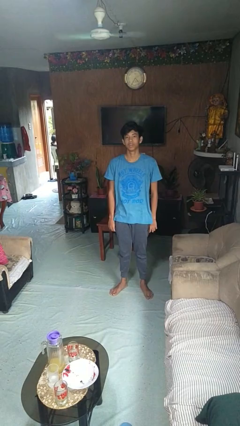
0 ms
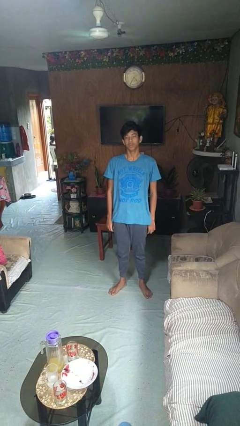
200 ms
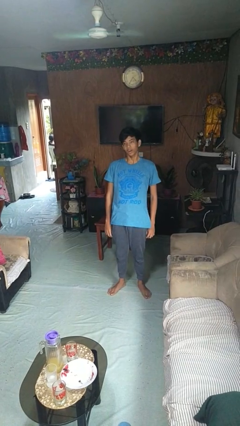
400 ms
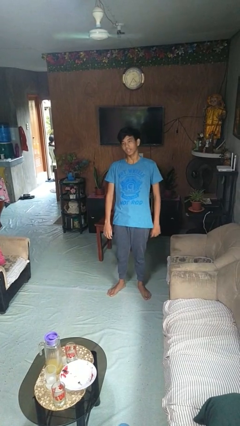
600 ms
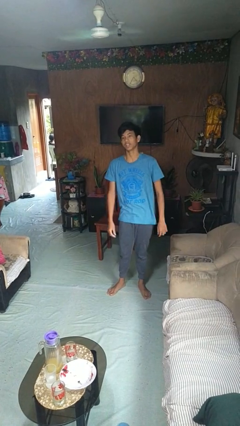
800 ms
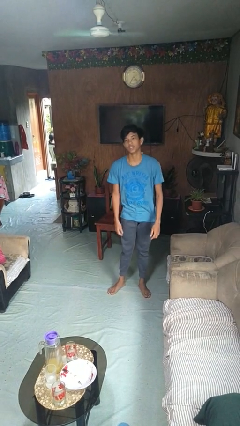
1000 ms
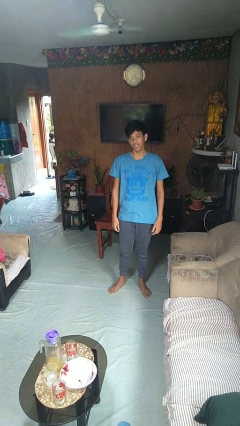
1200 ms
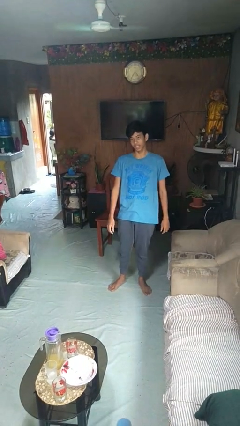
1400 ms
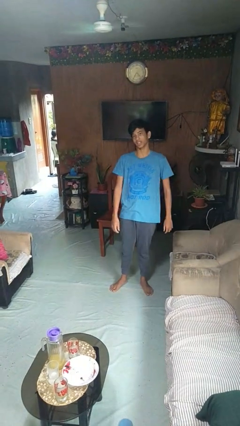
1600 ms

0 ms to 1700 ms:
person dances in place

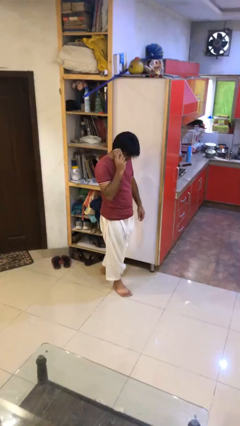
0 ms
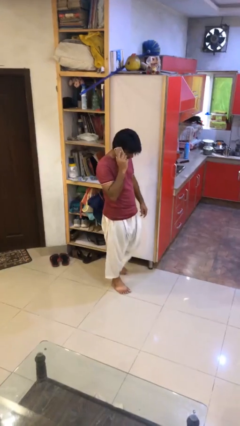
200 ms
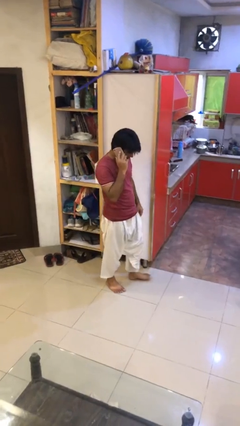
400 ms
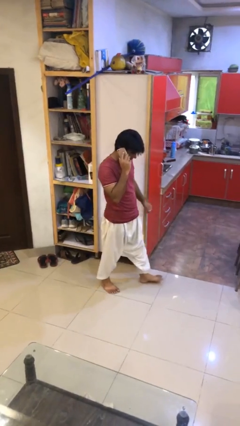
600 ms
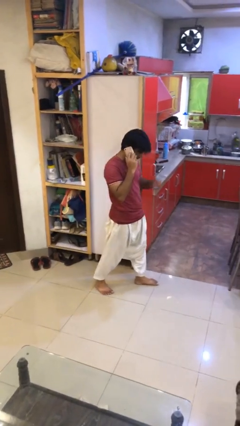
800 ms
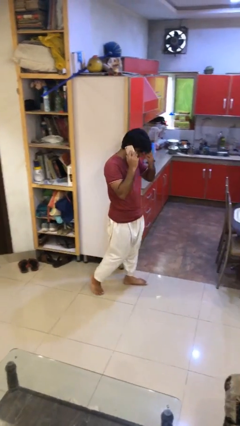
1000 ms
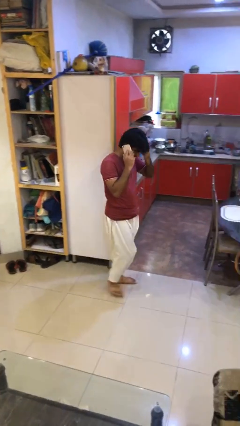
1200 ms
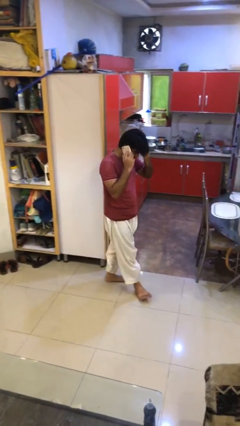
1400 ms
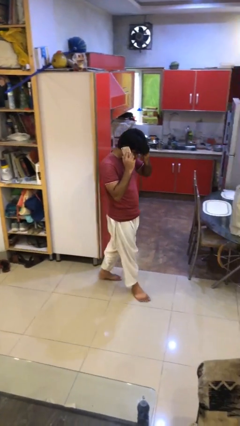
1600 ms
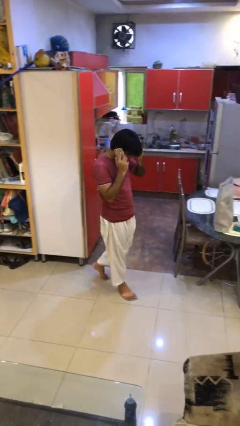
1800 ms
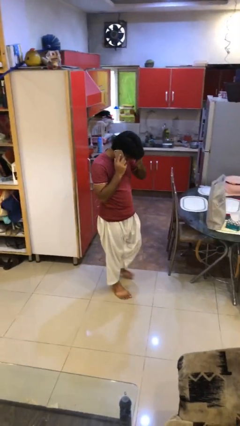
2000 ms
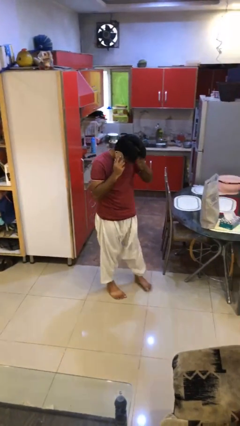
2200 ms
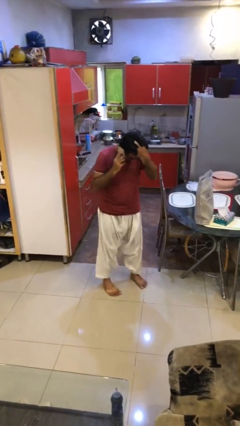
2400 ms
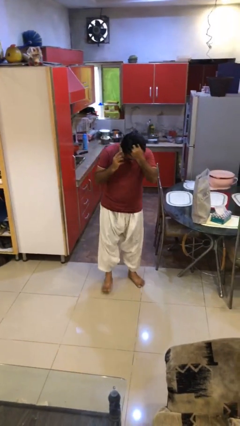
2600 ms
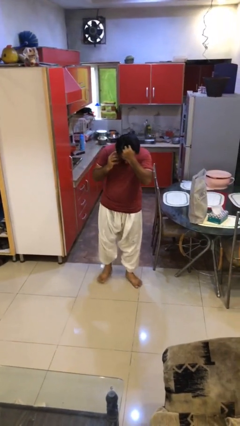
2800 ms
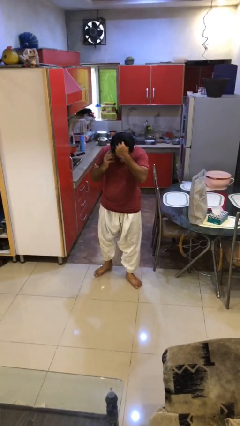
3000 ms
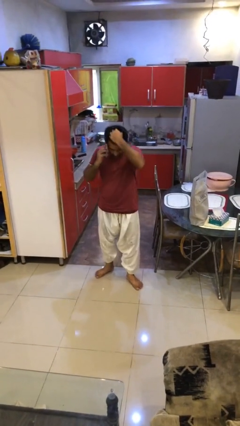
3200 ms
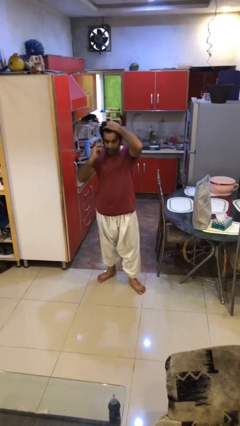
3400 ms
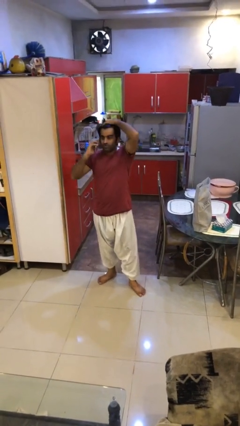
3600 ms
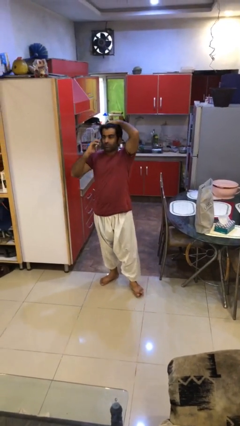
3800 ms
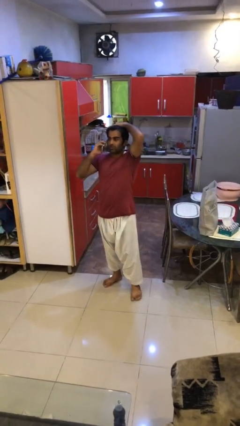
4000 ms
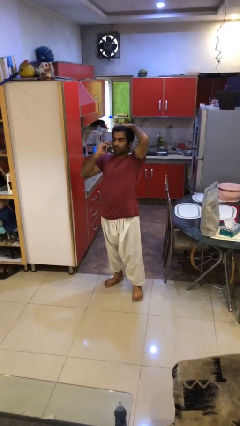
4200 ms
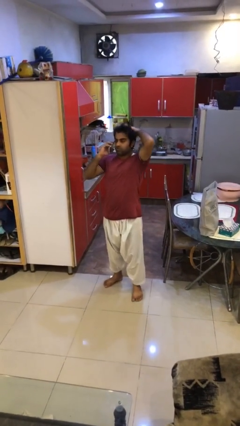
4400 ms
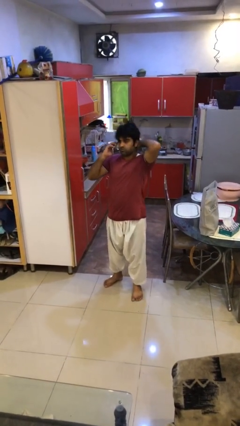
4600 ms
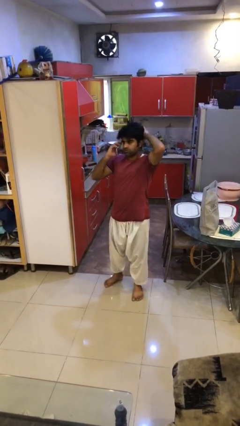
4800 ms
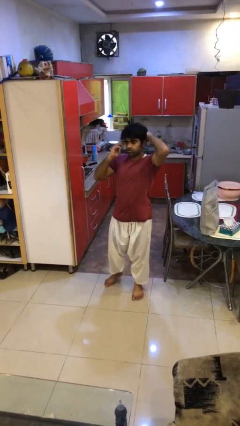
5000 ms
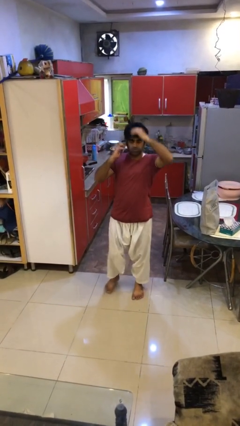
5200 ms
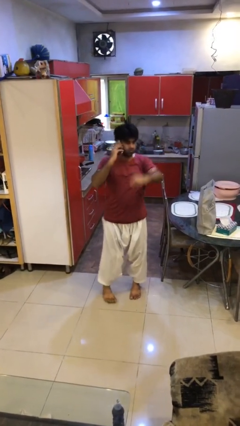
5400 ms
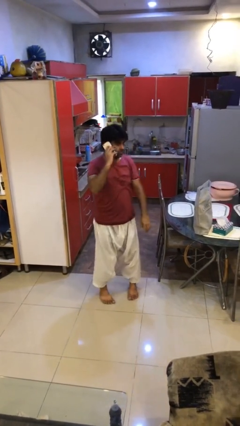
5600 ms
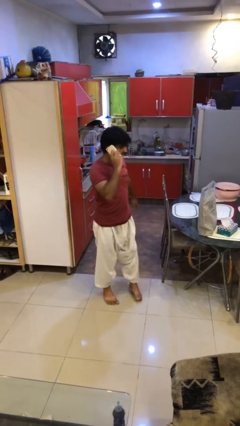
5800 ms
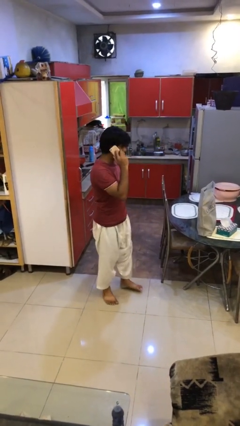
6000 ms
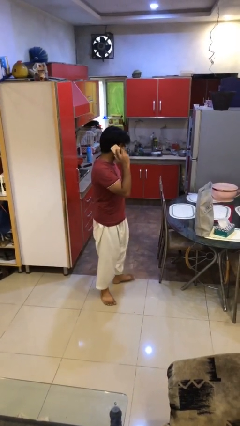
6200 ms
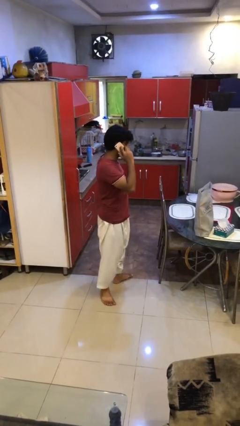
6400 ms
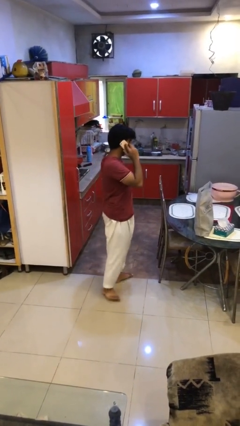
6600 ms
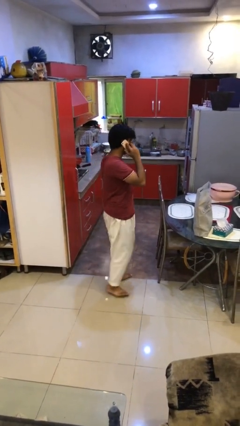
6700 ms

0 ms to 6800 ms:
person talks on phone

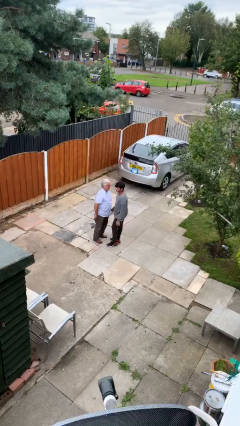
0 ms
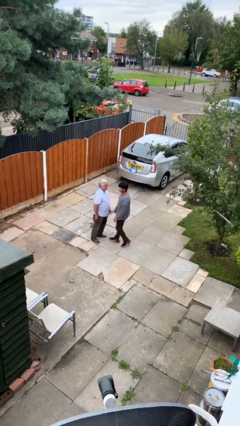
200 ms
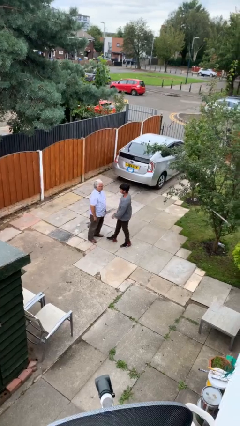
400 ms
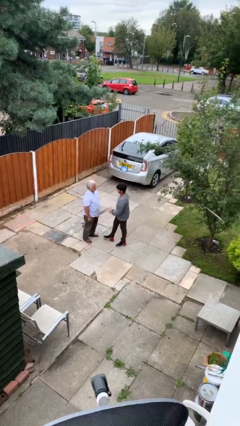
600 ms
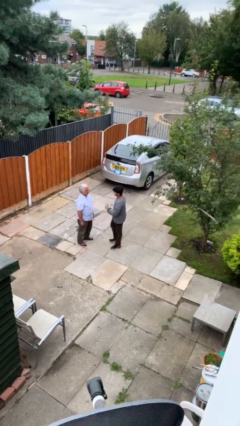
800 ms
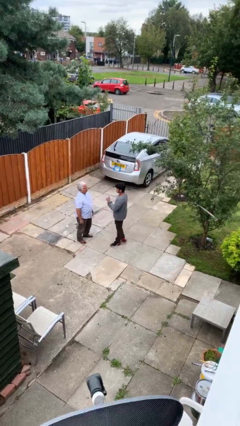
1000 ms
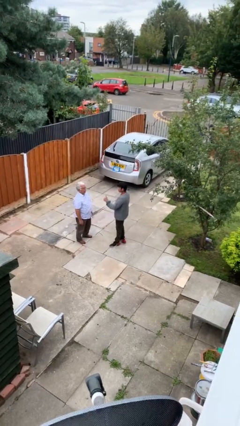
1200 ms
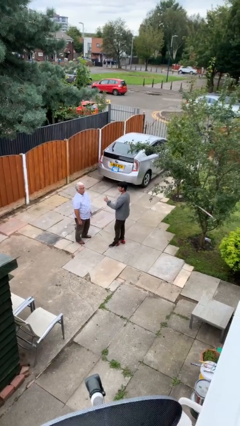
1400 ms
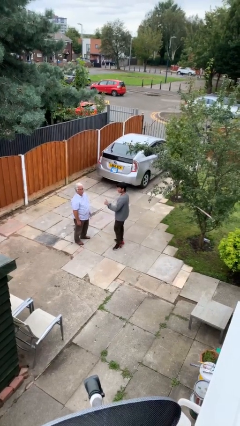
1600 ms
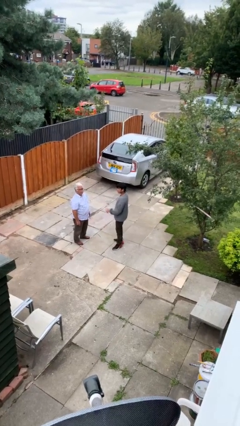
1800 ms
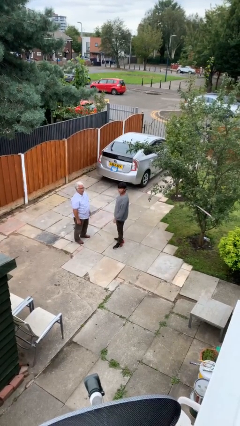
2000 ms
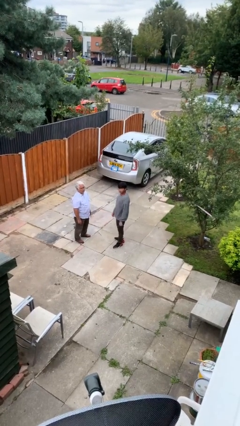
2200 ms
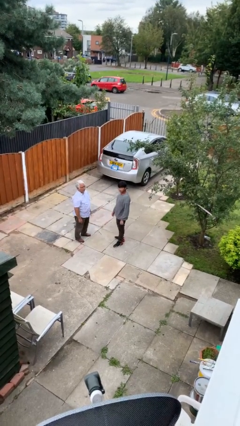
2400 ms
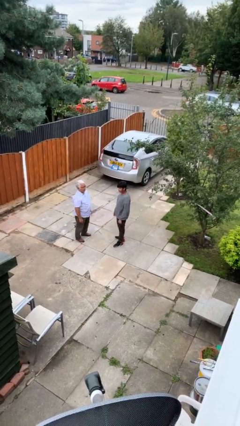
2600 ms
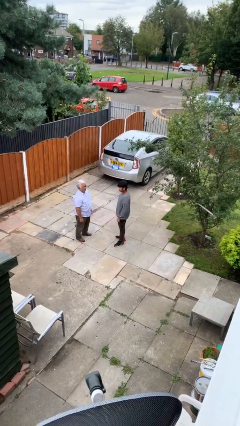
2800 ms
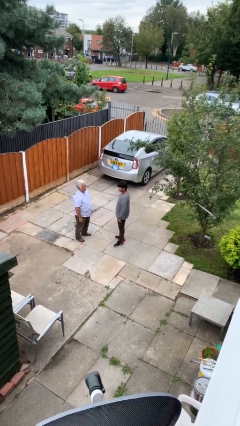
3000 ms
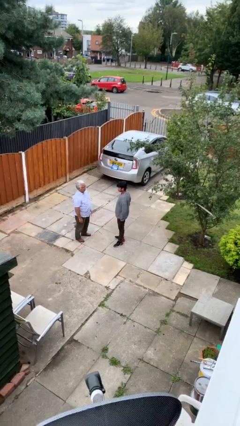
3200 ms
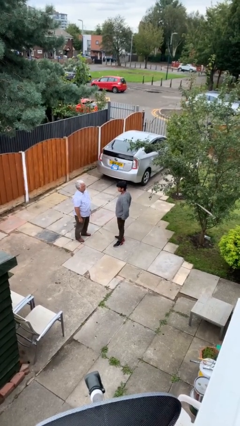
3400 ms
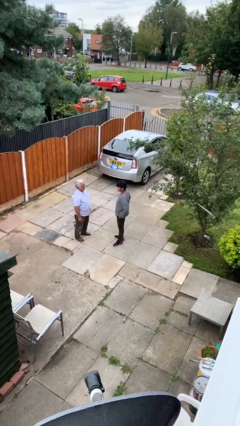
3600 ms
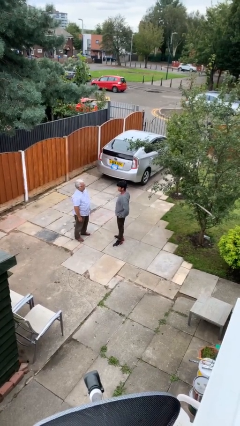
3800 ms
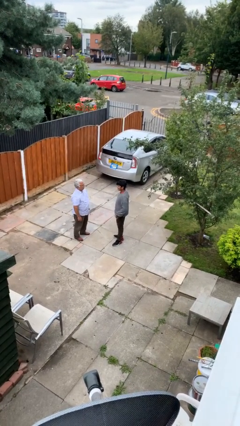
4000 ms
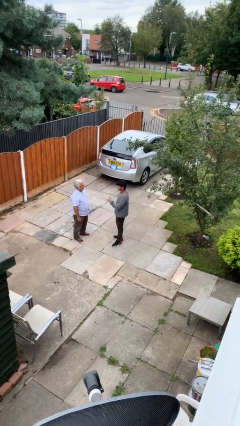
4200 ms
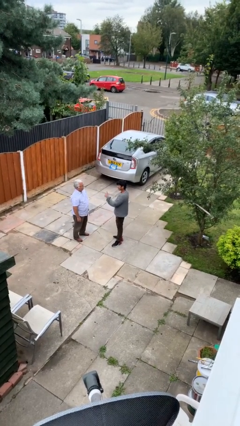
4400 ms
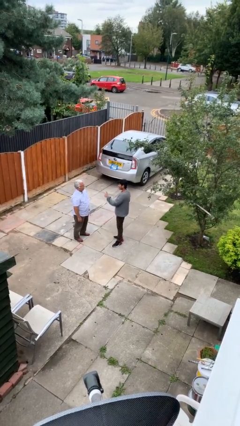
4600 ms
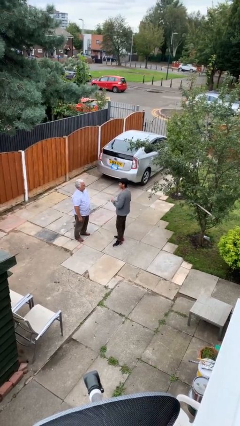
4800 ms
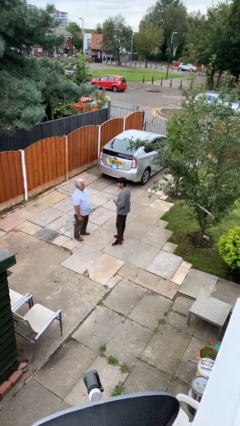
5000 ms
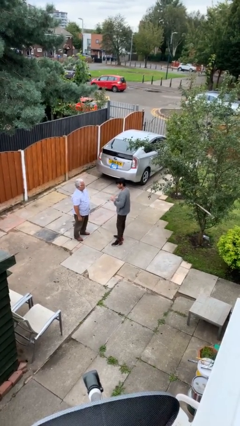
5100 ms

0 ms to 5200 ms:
person talks to person

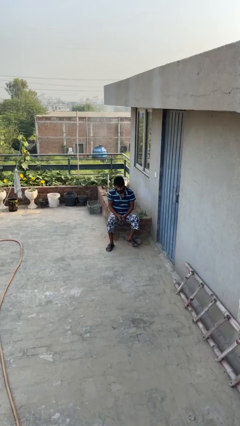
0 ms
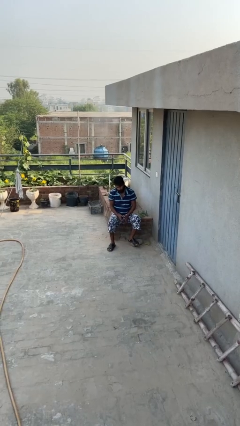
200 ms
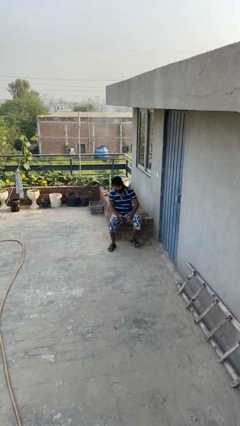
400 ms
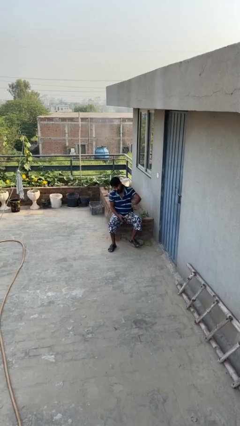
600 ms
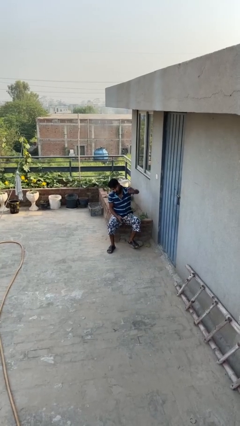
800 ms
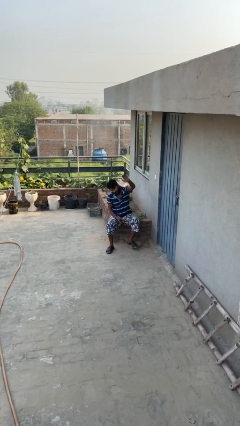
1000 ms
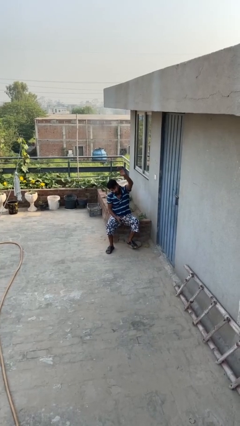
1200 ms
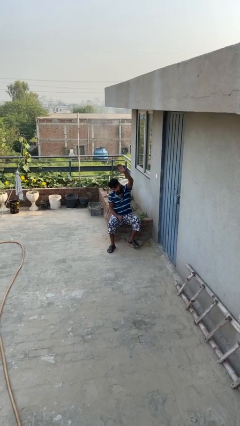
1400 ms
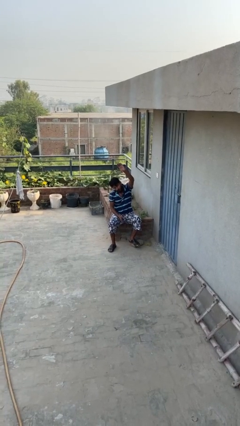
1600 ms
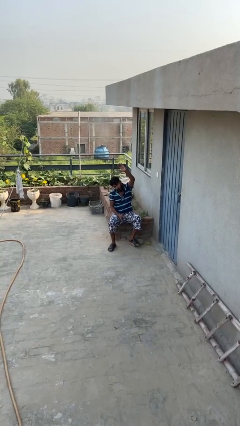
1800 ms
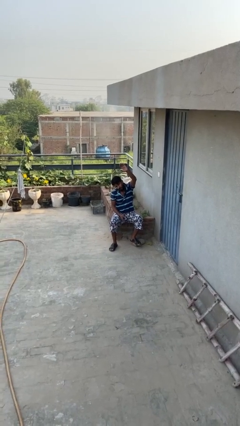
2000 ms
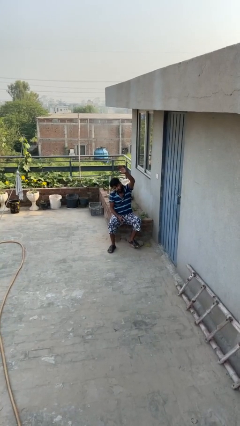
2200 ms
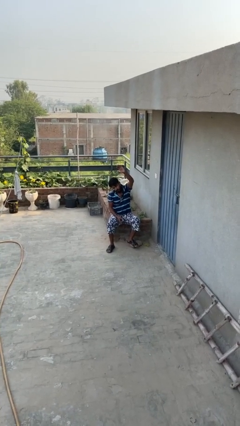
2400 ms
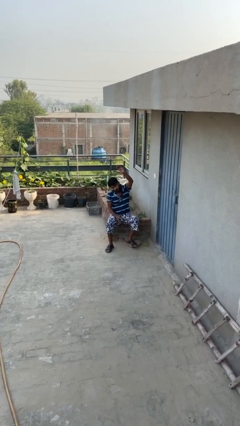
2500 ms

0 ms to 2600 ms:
person gestures raise hand

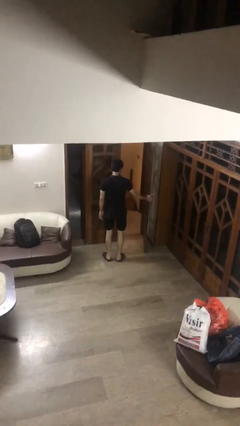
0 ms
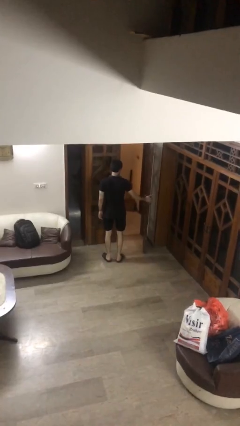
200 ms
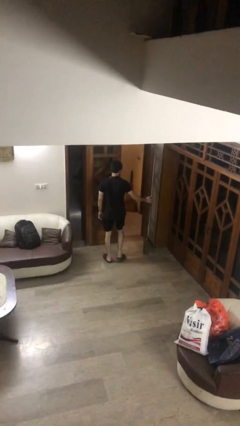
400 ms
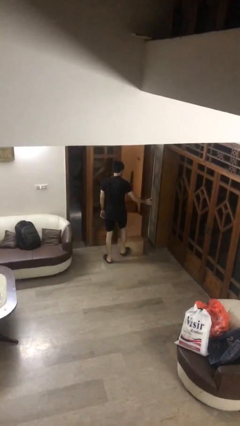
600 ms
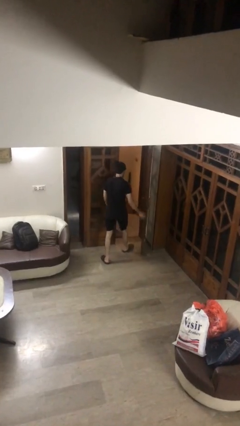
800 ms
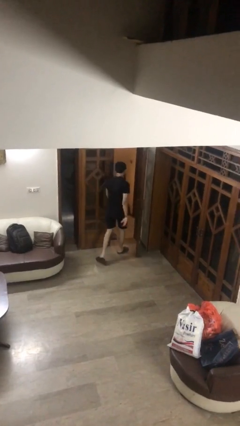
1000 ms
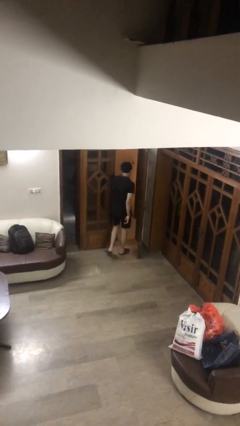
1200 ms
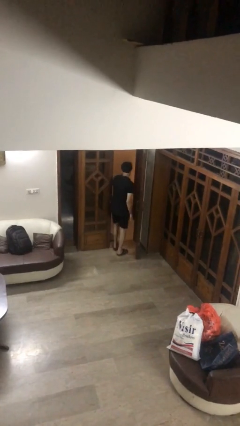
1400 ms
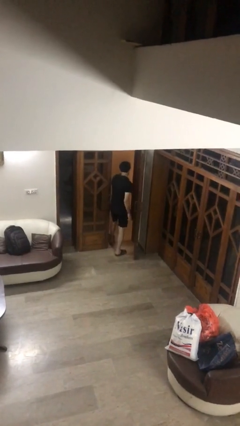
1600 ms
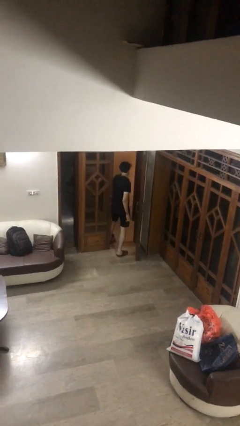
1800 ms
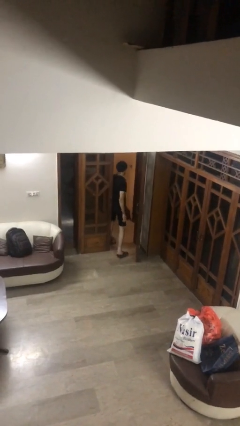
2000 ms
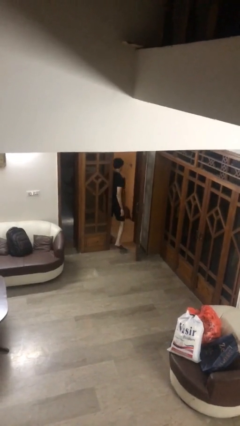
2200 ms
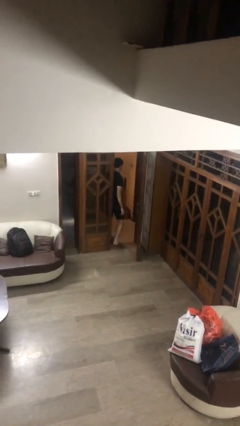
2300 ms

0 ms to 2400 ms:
person exits scene through structure
